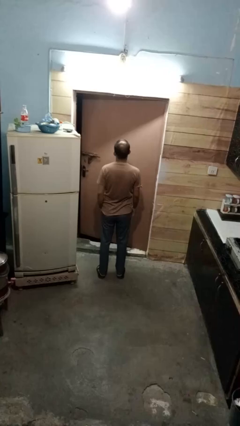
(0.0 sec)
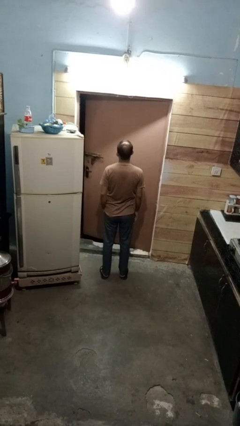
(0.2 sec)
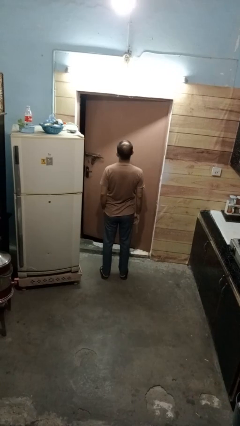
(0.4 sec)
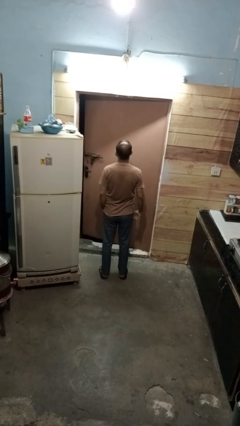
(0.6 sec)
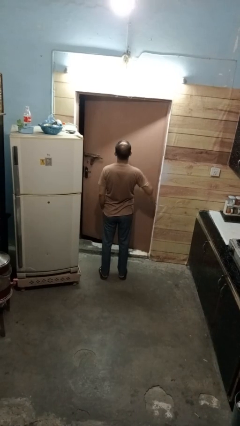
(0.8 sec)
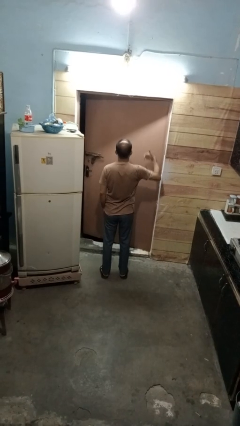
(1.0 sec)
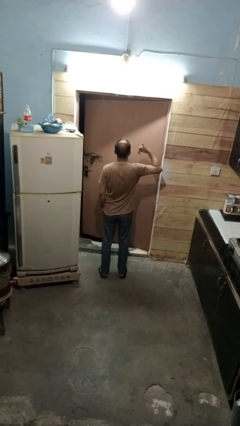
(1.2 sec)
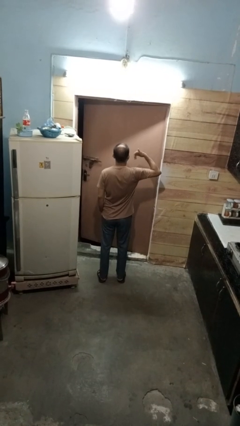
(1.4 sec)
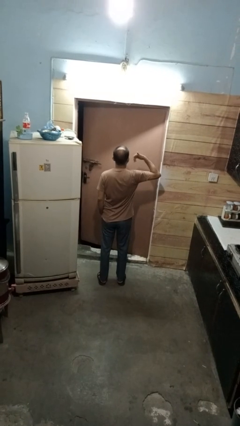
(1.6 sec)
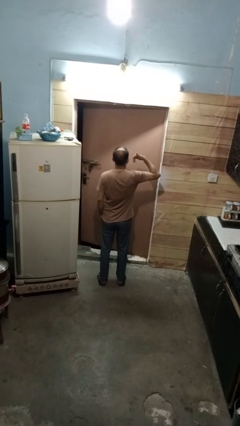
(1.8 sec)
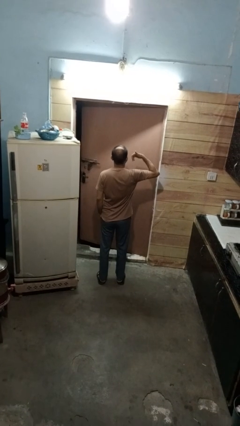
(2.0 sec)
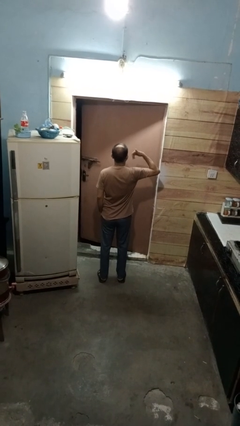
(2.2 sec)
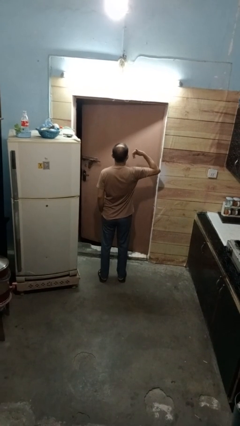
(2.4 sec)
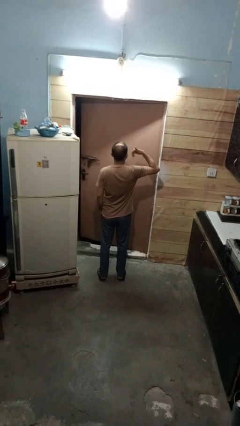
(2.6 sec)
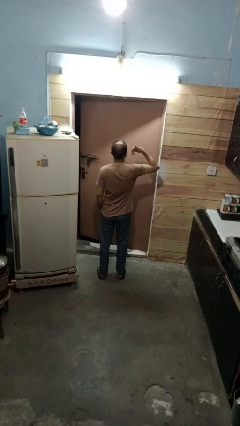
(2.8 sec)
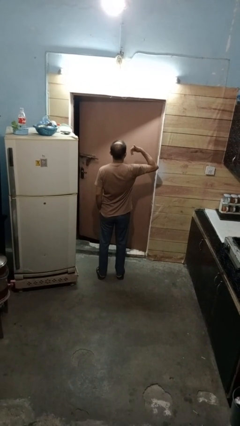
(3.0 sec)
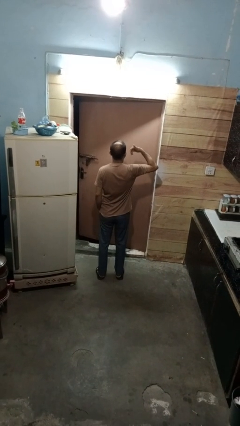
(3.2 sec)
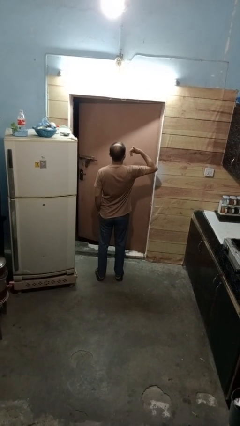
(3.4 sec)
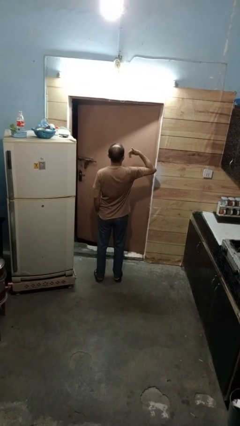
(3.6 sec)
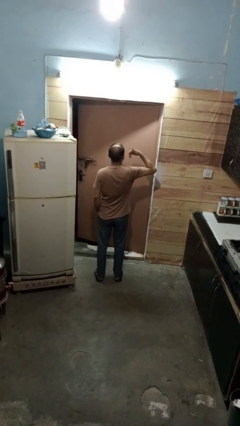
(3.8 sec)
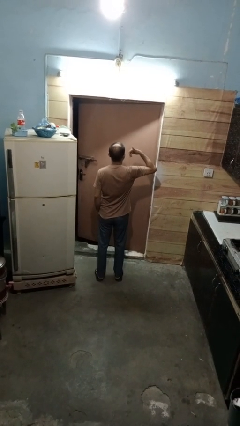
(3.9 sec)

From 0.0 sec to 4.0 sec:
person gestures call me

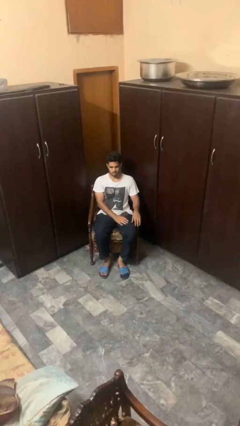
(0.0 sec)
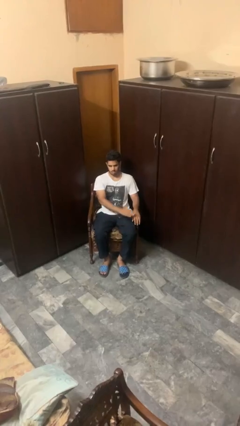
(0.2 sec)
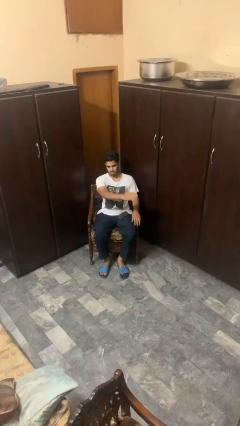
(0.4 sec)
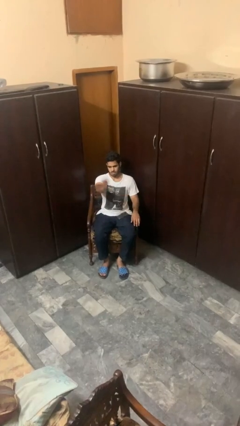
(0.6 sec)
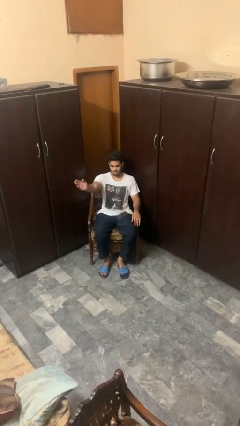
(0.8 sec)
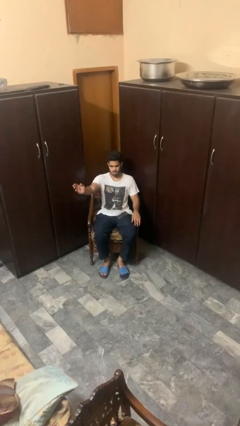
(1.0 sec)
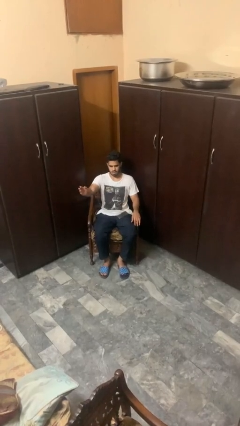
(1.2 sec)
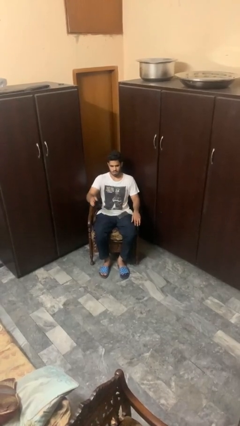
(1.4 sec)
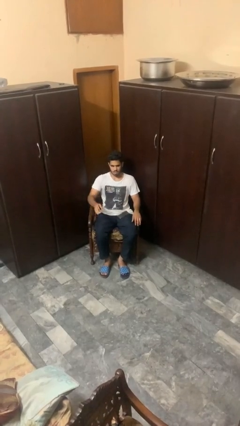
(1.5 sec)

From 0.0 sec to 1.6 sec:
person gestures swipe right

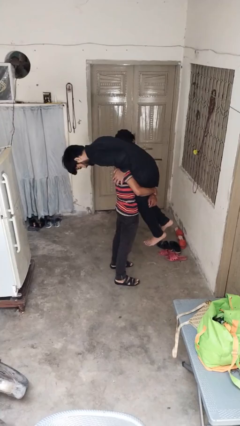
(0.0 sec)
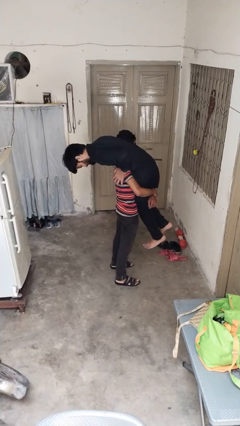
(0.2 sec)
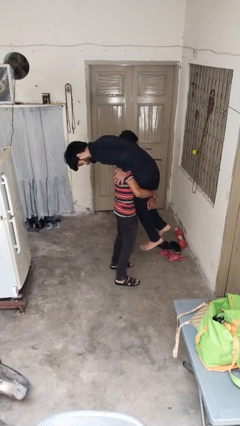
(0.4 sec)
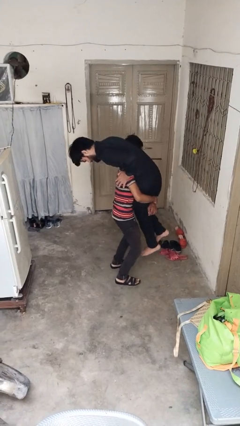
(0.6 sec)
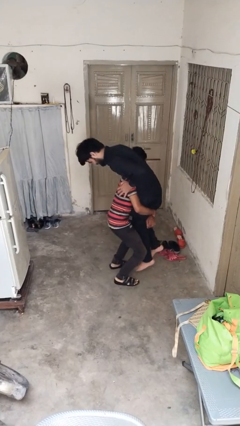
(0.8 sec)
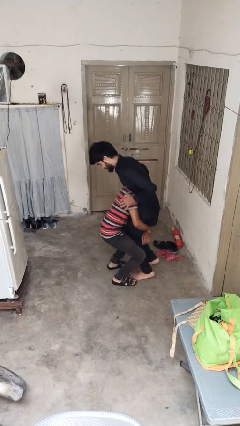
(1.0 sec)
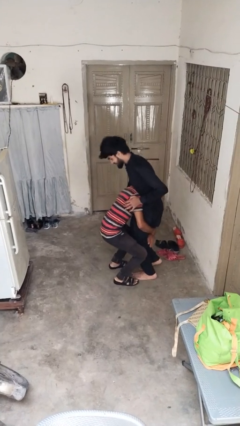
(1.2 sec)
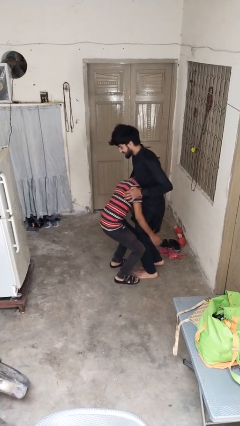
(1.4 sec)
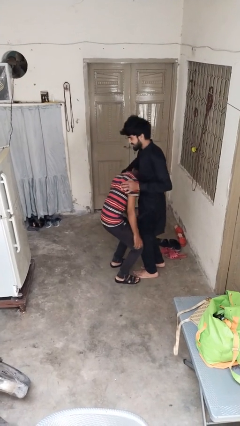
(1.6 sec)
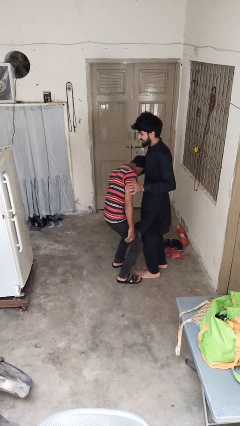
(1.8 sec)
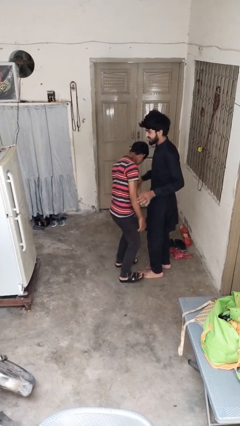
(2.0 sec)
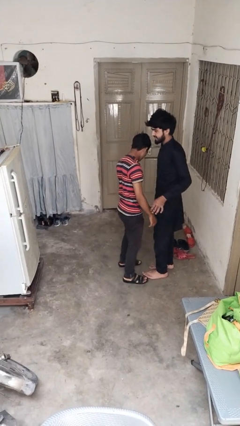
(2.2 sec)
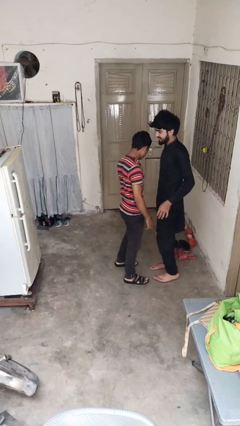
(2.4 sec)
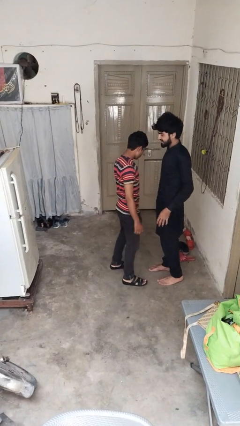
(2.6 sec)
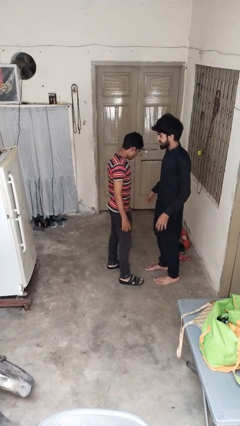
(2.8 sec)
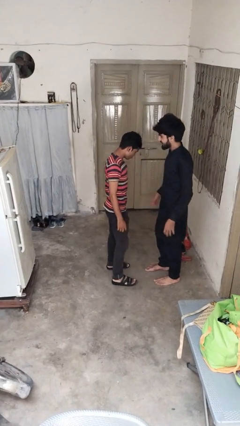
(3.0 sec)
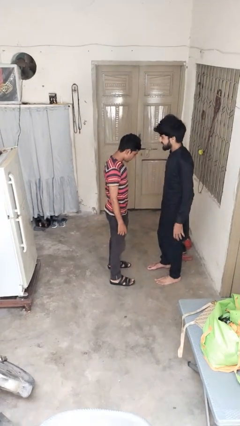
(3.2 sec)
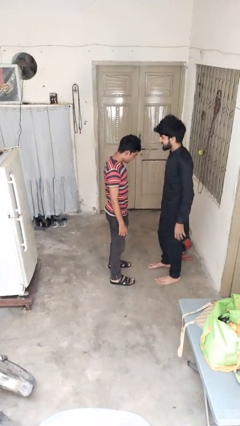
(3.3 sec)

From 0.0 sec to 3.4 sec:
person puts down person

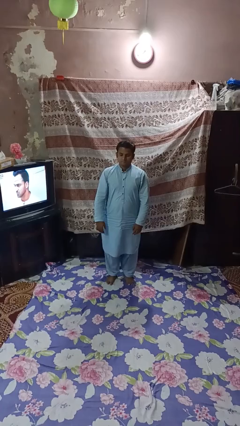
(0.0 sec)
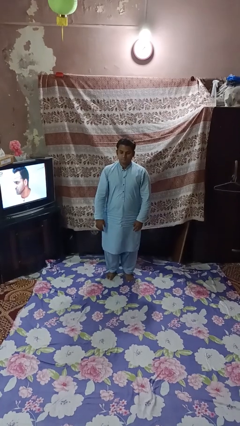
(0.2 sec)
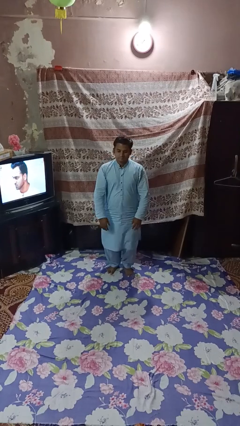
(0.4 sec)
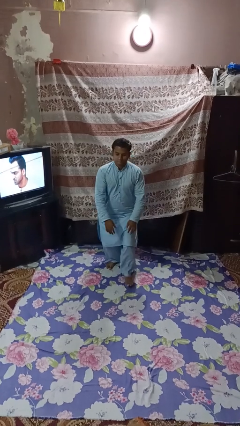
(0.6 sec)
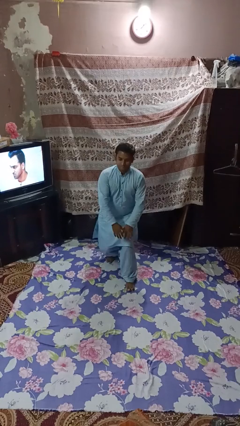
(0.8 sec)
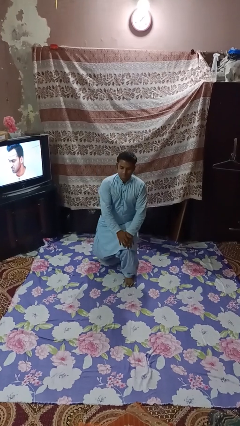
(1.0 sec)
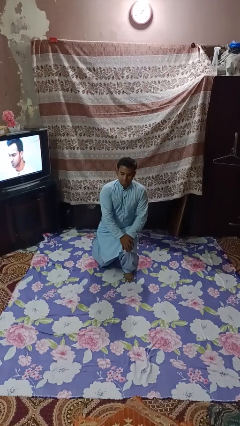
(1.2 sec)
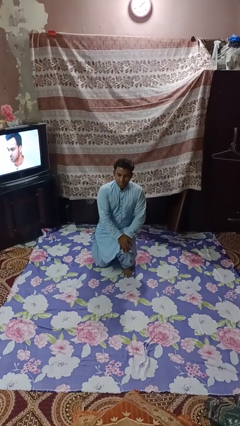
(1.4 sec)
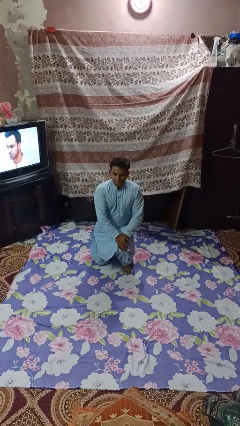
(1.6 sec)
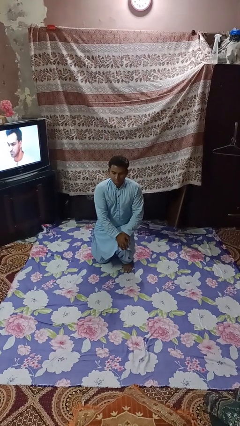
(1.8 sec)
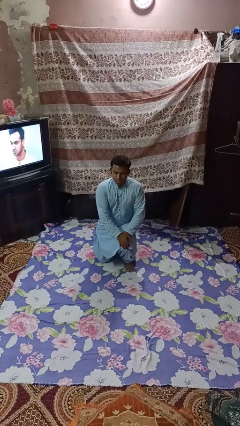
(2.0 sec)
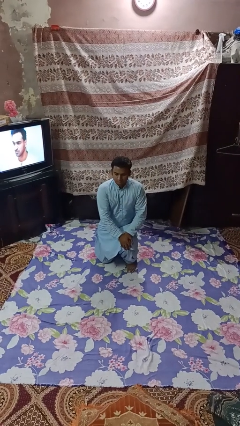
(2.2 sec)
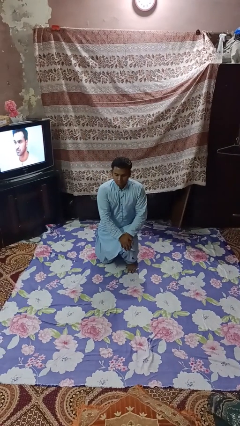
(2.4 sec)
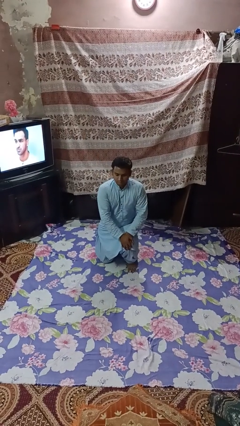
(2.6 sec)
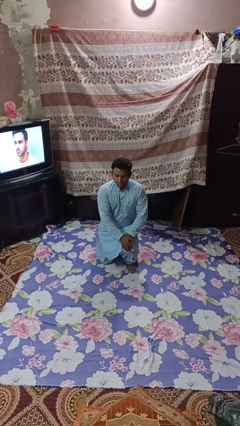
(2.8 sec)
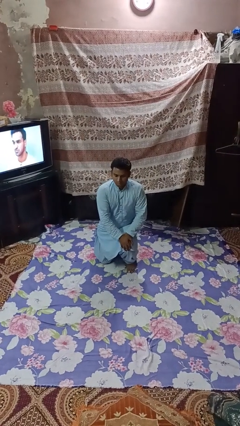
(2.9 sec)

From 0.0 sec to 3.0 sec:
person exercises with lunges

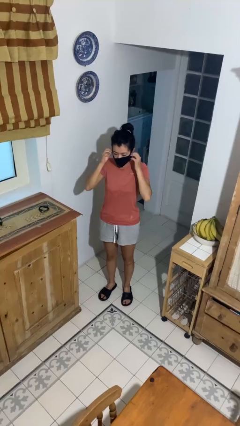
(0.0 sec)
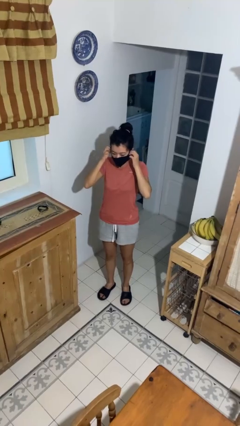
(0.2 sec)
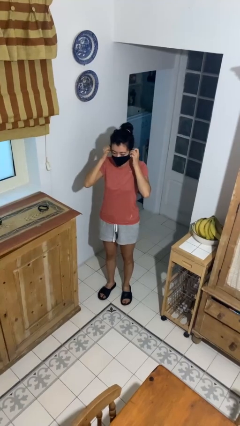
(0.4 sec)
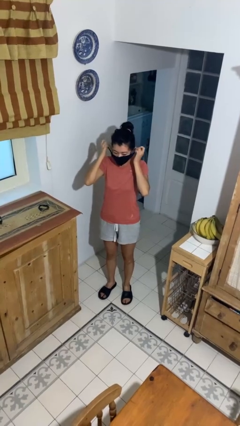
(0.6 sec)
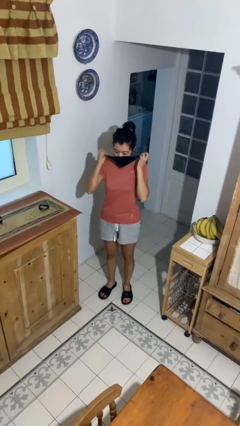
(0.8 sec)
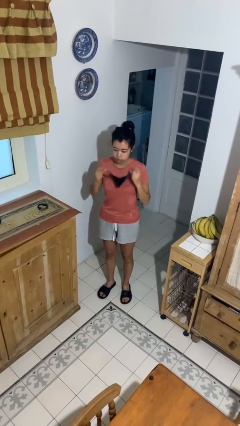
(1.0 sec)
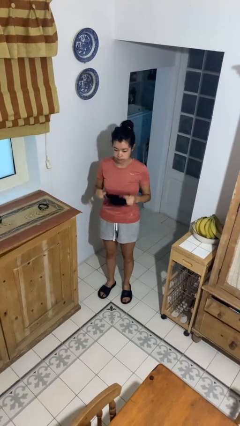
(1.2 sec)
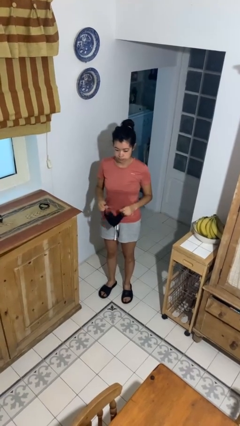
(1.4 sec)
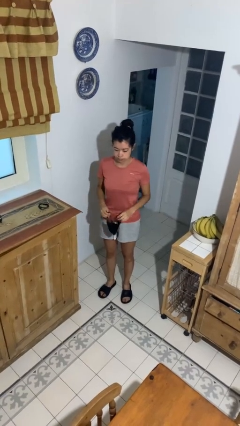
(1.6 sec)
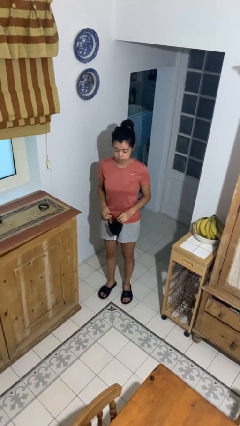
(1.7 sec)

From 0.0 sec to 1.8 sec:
person takes off facemask

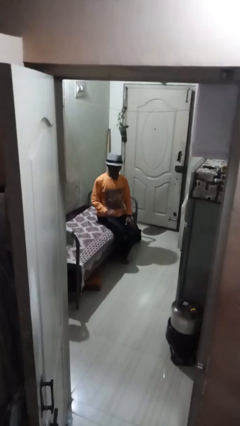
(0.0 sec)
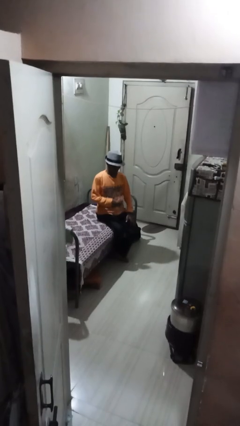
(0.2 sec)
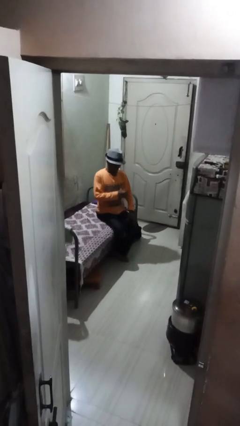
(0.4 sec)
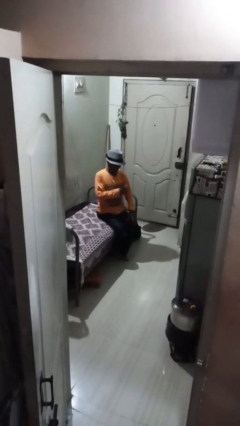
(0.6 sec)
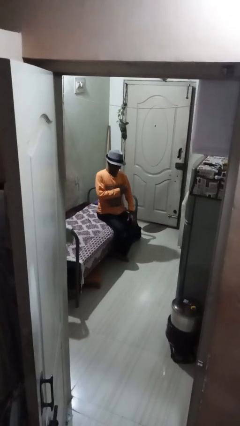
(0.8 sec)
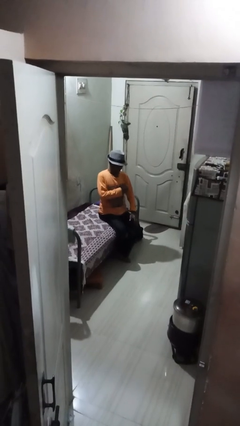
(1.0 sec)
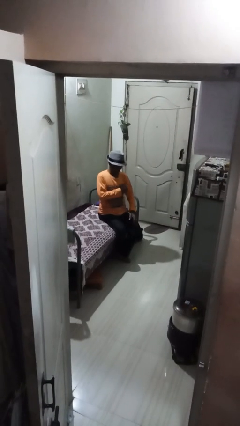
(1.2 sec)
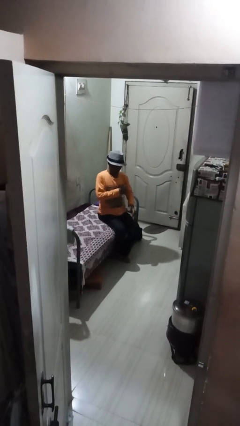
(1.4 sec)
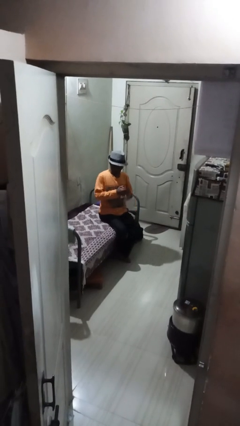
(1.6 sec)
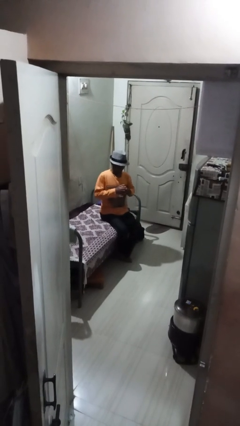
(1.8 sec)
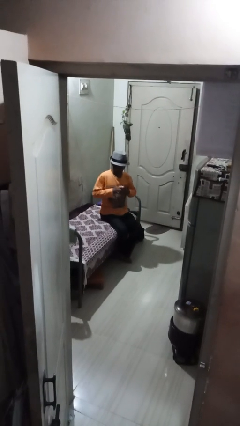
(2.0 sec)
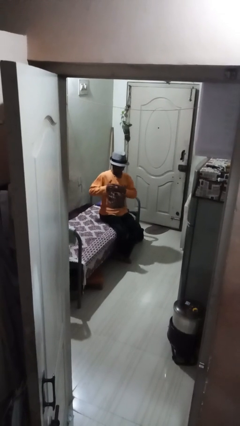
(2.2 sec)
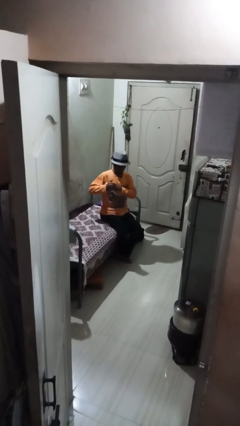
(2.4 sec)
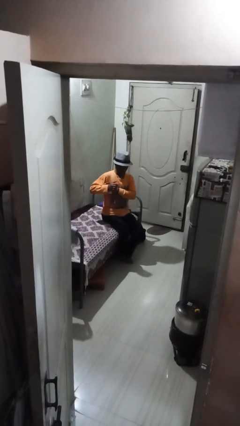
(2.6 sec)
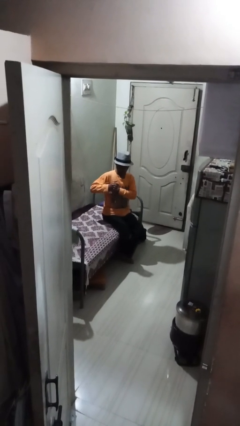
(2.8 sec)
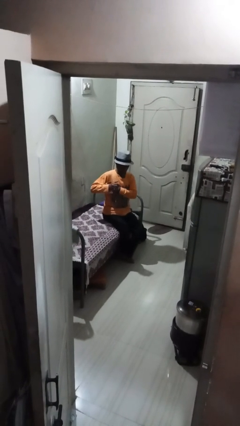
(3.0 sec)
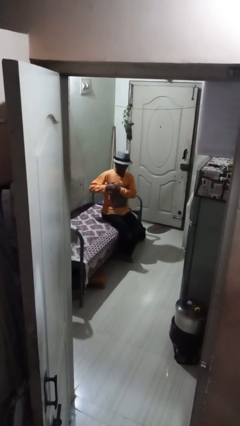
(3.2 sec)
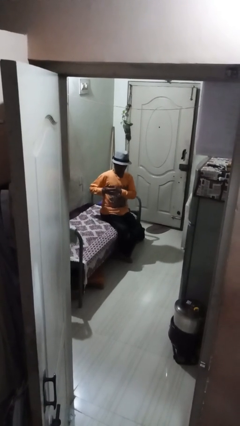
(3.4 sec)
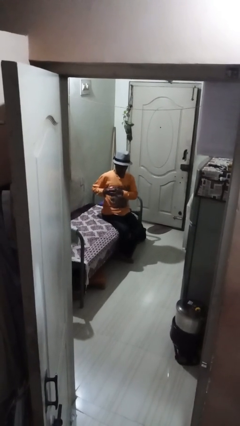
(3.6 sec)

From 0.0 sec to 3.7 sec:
person applies deodorant
